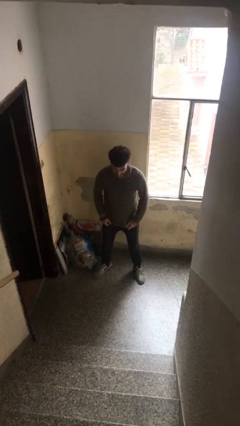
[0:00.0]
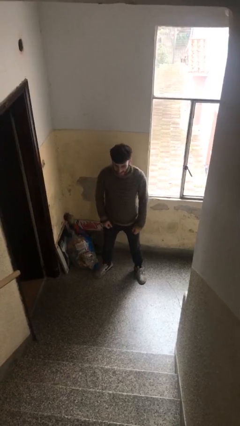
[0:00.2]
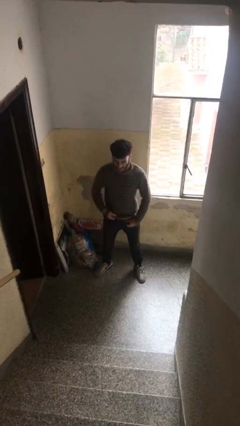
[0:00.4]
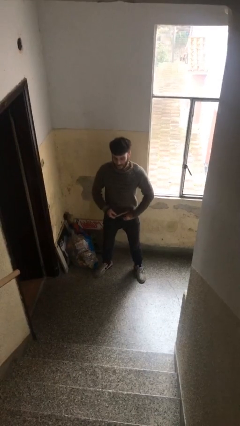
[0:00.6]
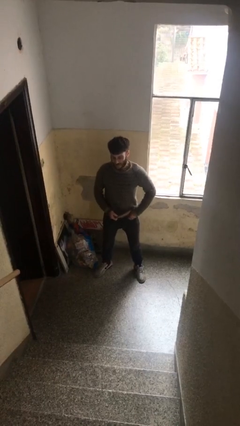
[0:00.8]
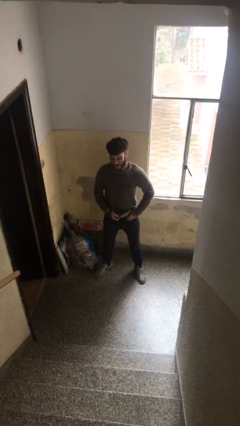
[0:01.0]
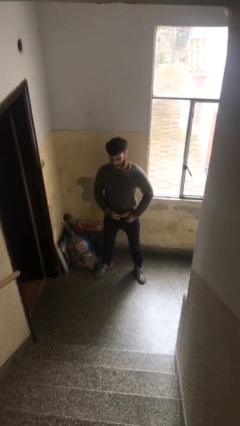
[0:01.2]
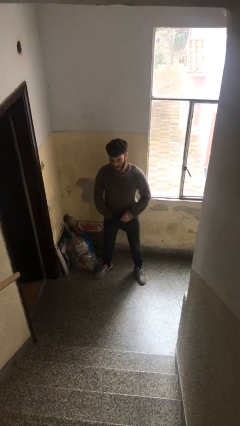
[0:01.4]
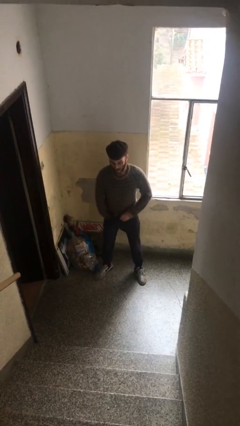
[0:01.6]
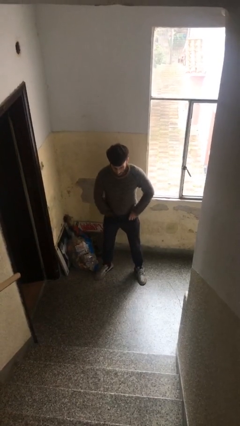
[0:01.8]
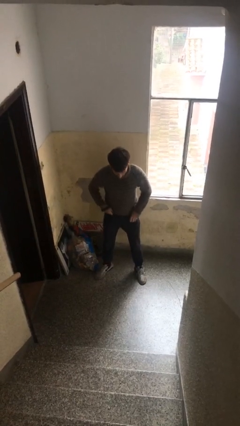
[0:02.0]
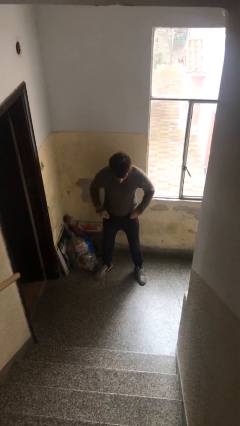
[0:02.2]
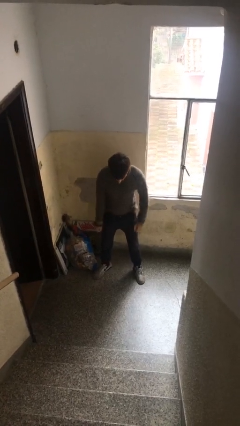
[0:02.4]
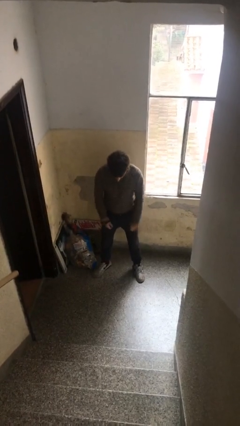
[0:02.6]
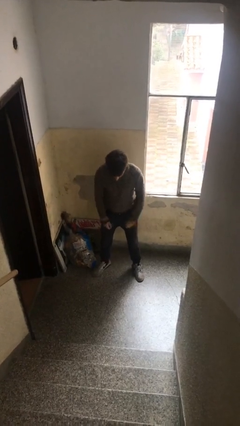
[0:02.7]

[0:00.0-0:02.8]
person tucks in shirt

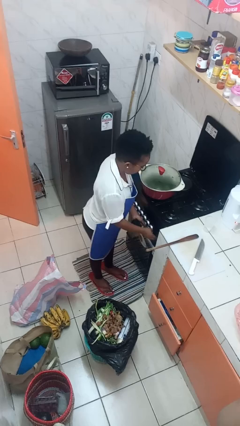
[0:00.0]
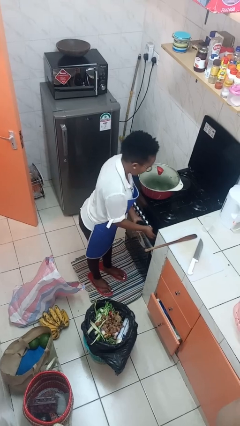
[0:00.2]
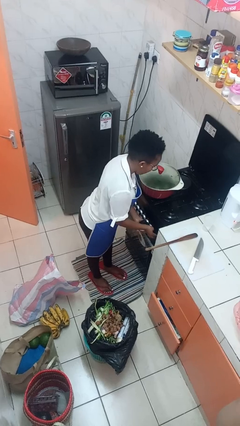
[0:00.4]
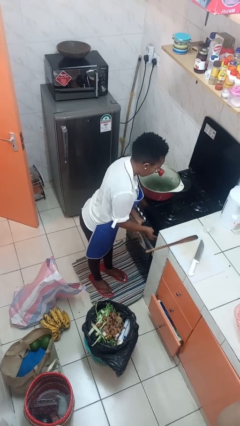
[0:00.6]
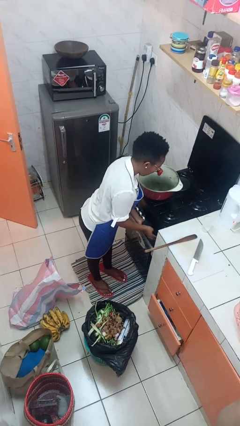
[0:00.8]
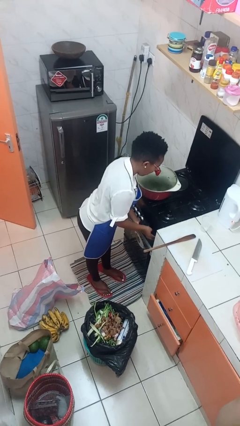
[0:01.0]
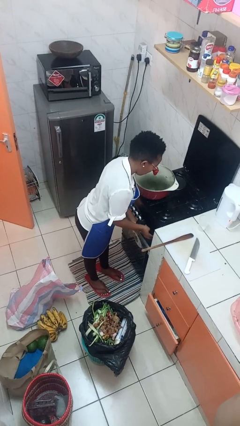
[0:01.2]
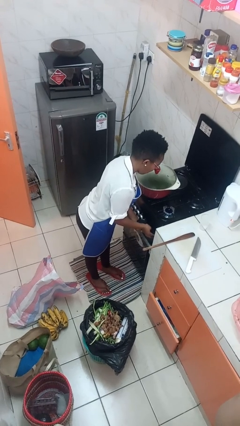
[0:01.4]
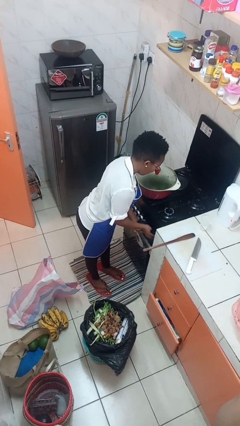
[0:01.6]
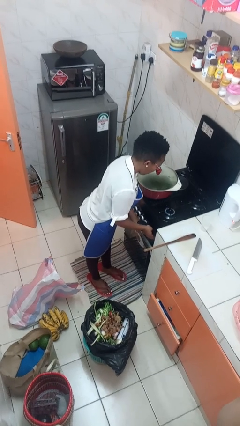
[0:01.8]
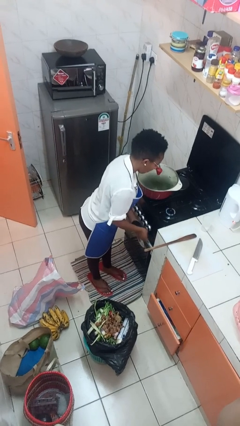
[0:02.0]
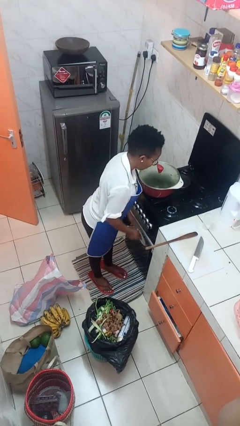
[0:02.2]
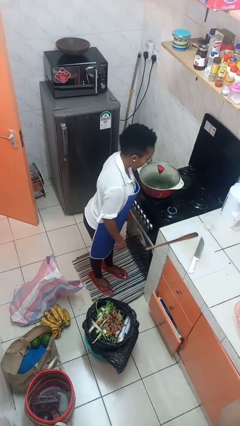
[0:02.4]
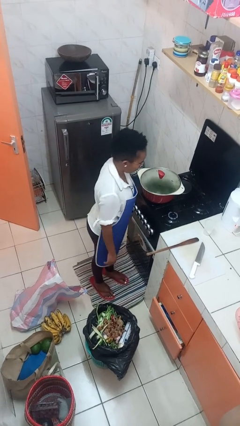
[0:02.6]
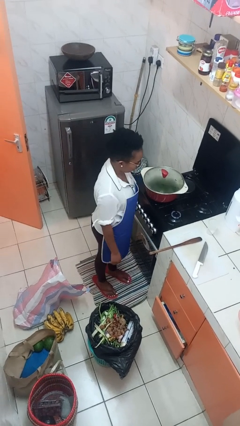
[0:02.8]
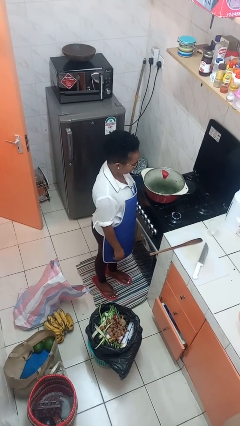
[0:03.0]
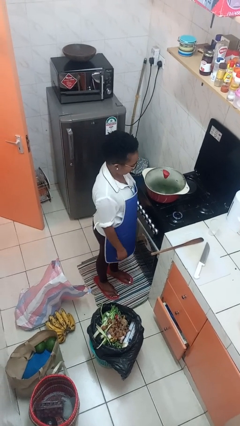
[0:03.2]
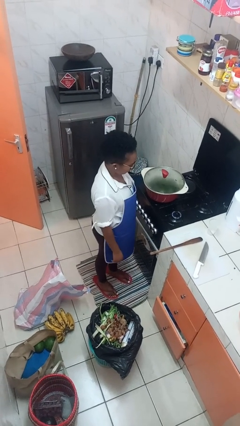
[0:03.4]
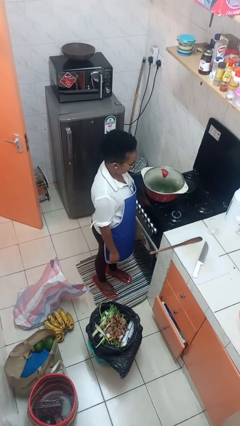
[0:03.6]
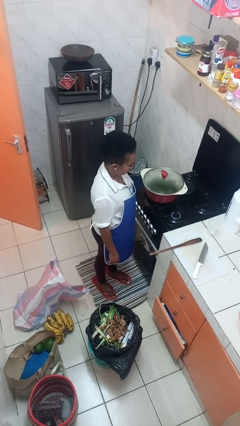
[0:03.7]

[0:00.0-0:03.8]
person turns on stovetop

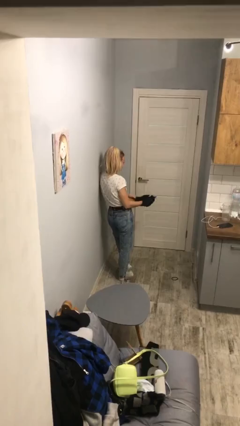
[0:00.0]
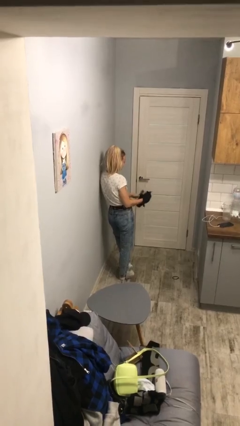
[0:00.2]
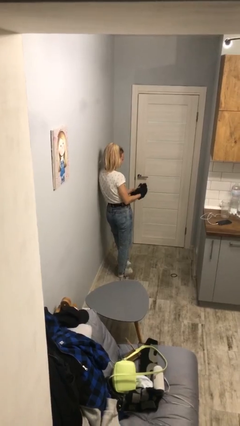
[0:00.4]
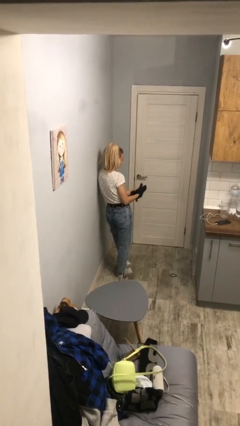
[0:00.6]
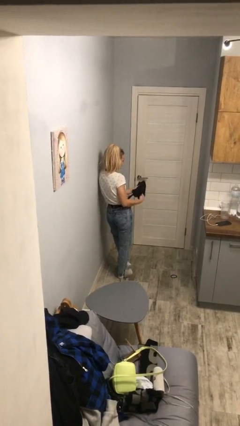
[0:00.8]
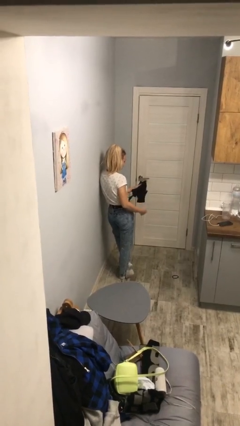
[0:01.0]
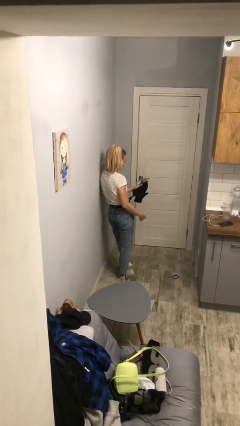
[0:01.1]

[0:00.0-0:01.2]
person takes off gloves

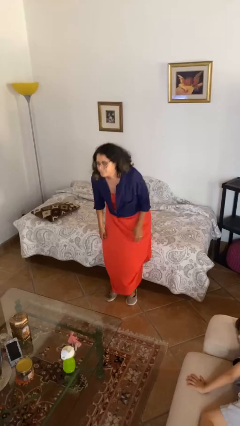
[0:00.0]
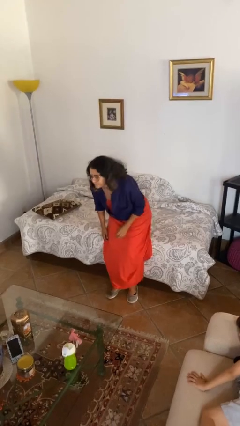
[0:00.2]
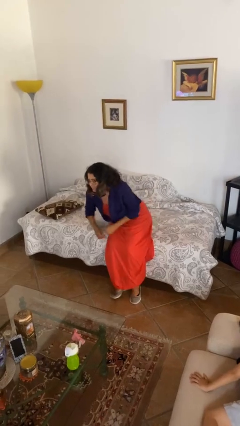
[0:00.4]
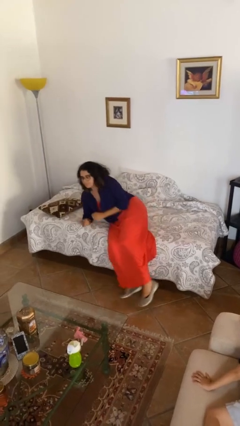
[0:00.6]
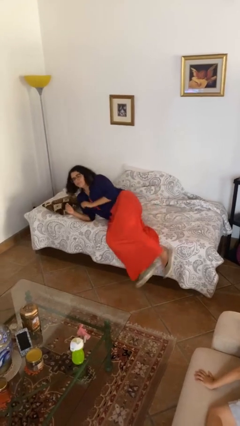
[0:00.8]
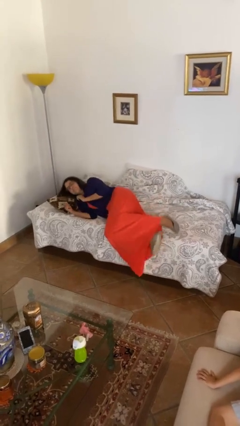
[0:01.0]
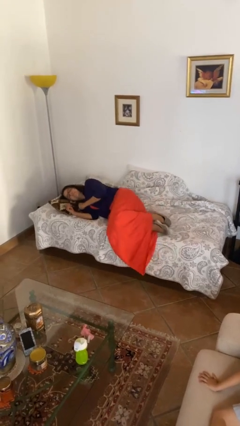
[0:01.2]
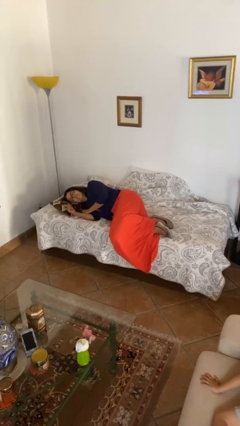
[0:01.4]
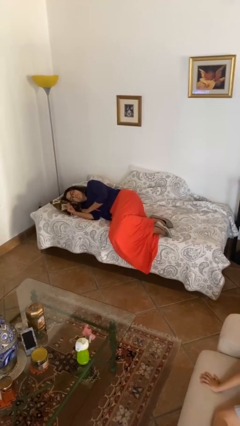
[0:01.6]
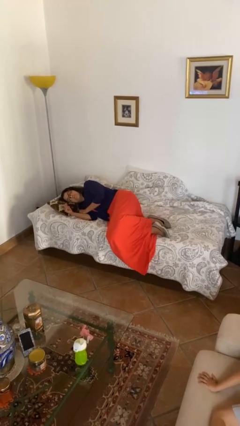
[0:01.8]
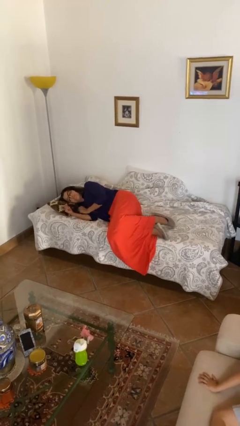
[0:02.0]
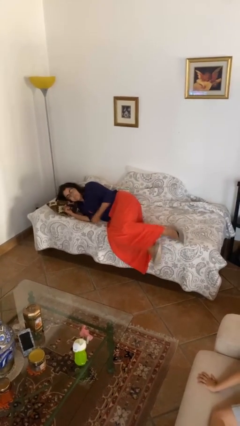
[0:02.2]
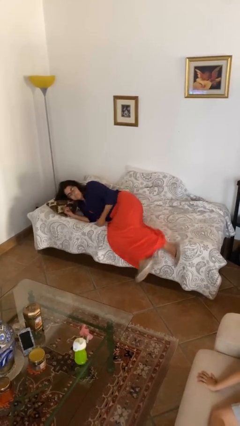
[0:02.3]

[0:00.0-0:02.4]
person lies down on bed

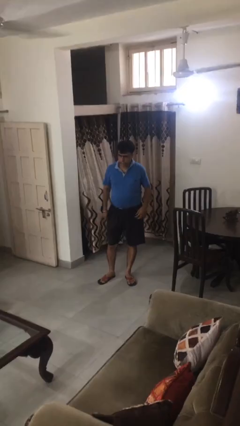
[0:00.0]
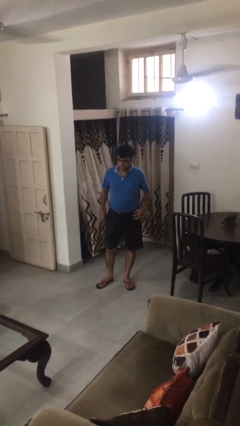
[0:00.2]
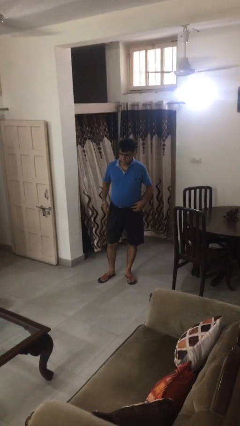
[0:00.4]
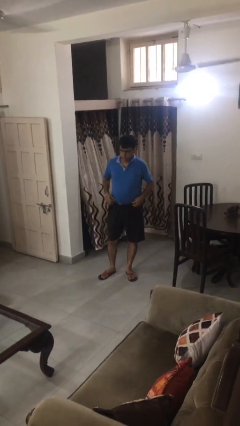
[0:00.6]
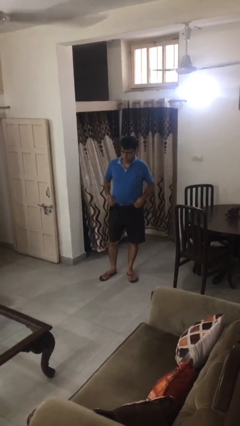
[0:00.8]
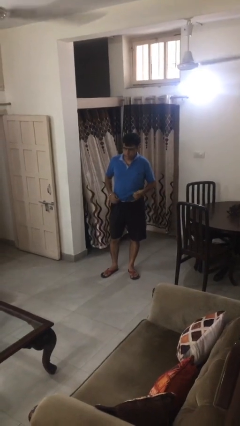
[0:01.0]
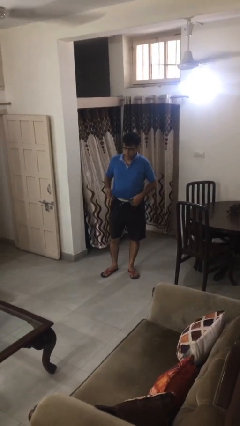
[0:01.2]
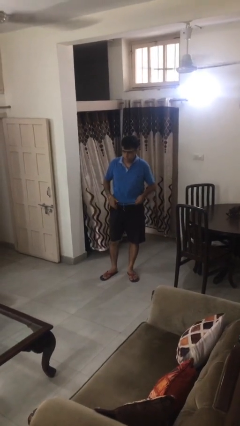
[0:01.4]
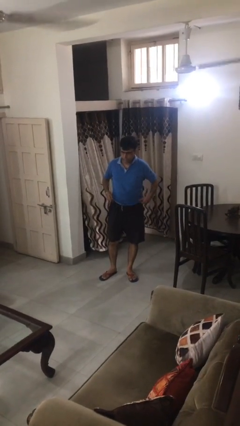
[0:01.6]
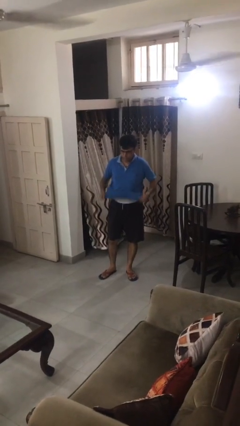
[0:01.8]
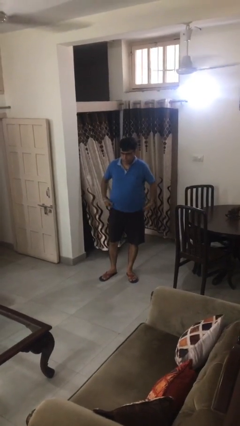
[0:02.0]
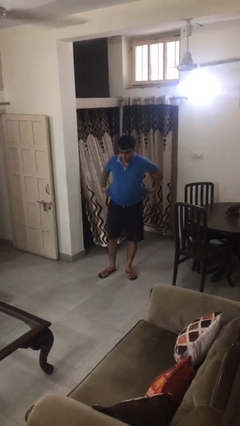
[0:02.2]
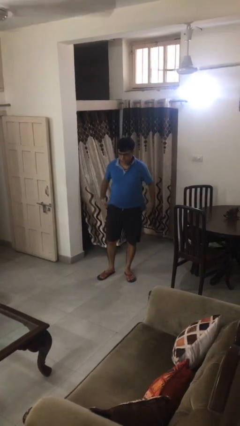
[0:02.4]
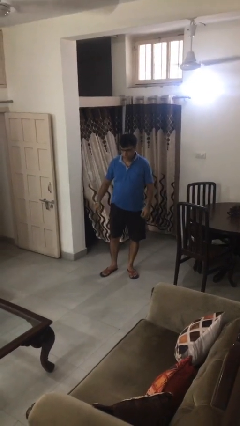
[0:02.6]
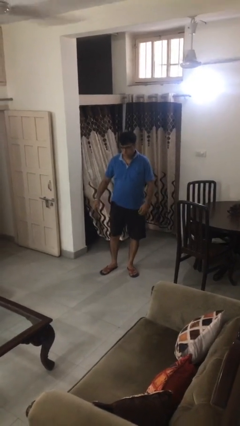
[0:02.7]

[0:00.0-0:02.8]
person untucks shirt

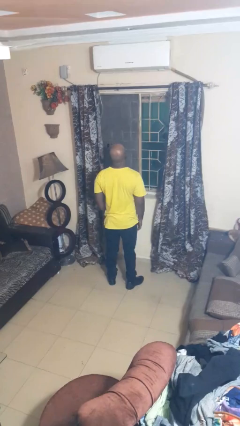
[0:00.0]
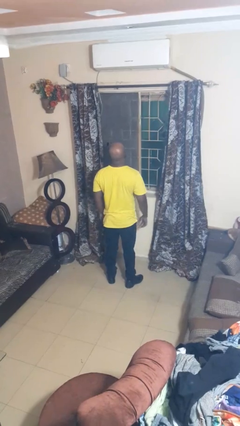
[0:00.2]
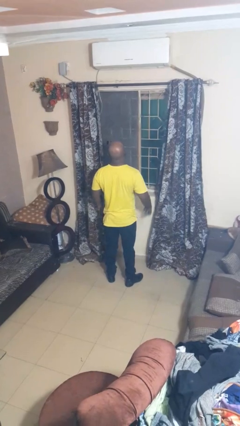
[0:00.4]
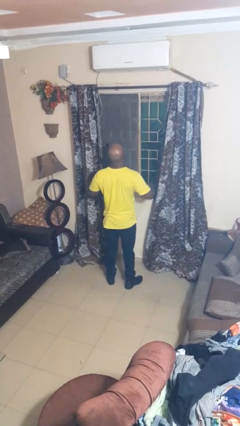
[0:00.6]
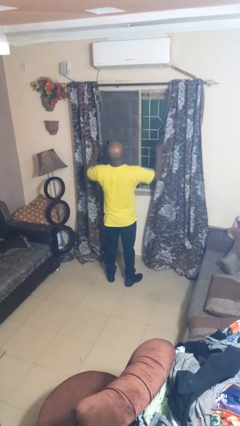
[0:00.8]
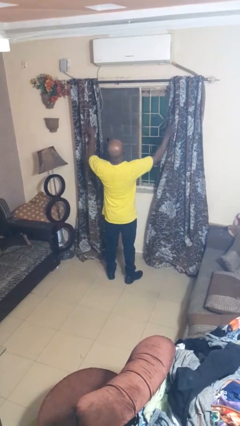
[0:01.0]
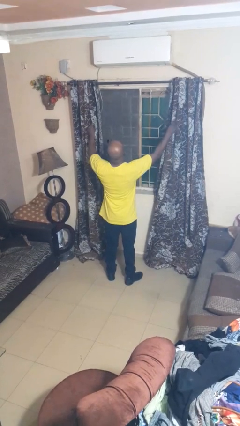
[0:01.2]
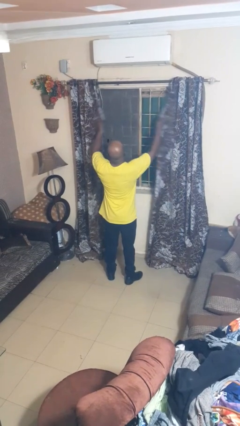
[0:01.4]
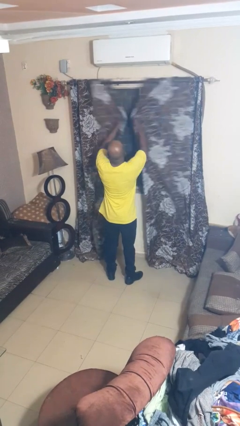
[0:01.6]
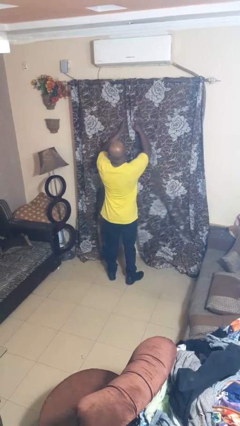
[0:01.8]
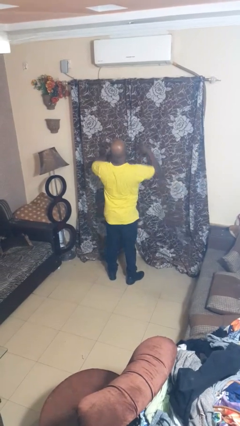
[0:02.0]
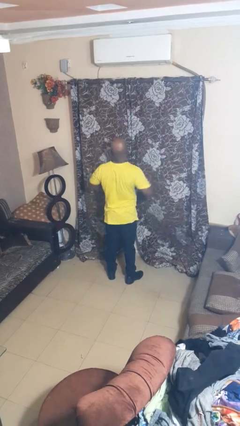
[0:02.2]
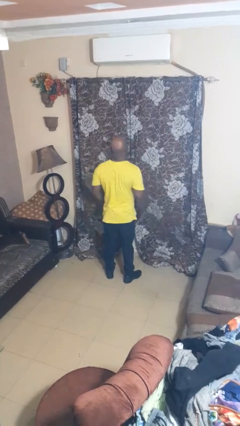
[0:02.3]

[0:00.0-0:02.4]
person closes curtains

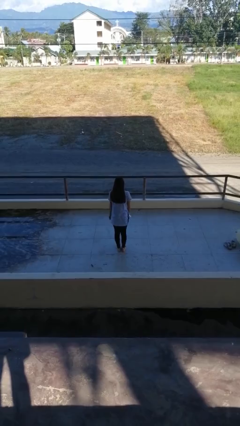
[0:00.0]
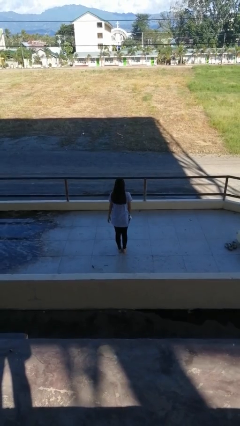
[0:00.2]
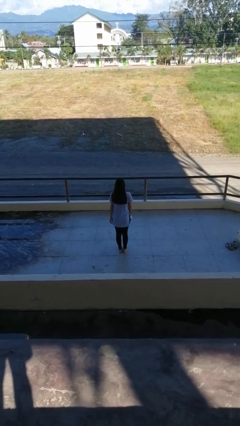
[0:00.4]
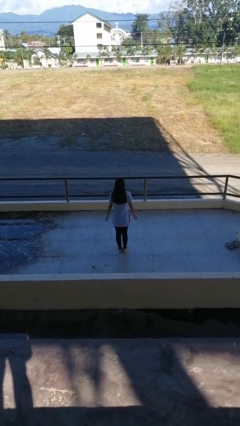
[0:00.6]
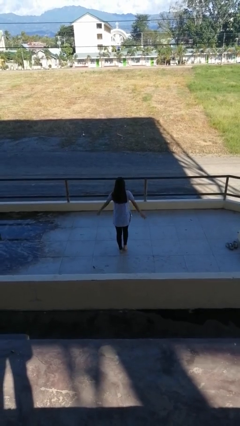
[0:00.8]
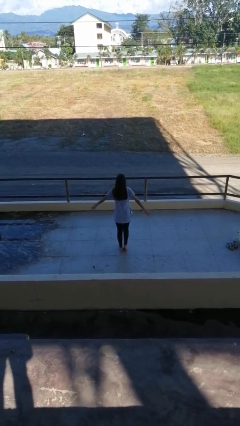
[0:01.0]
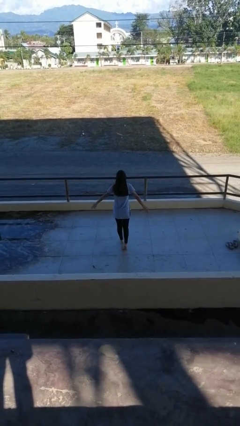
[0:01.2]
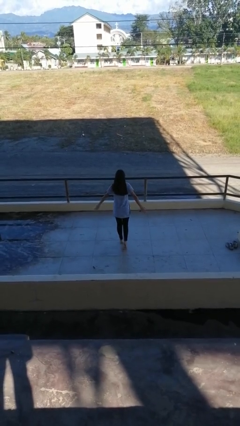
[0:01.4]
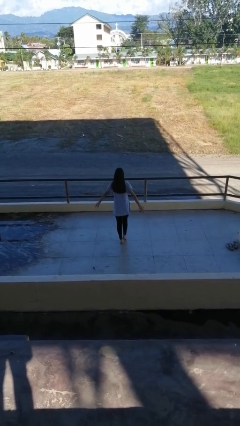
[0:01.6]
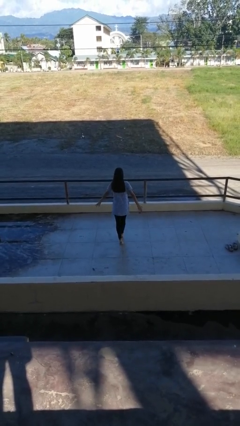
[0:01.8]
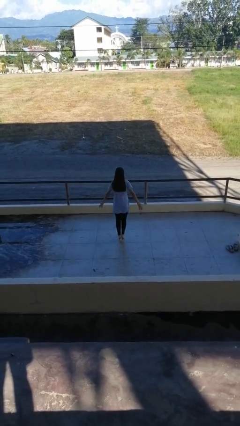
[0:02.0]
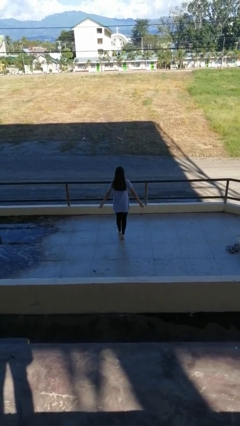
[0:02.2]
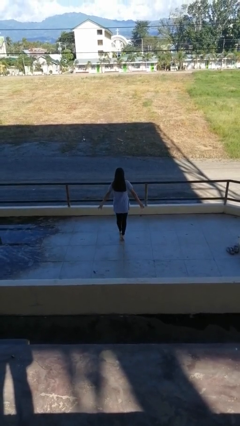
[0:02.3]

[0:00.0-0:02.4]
person walks tiptoe
